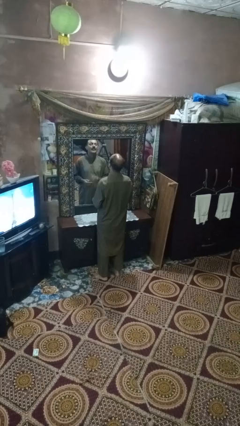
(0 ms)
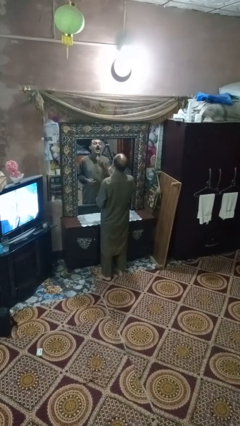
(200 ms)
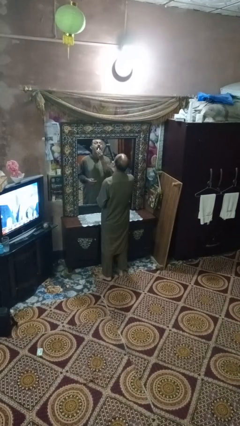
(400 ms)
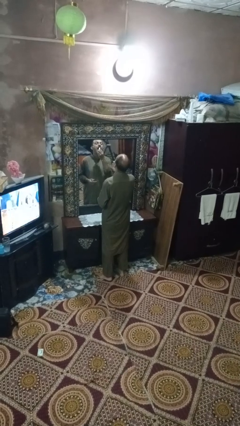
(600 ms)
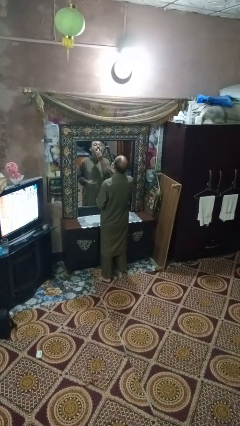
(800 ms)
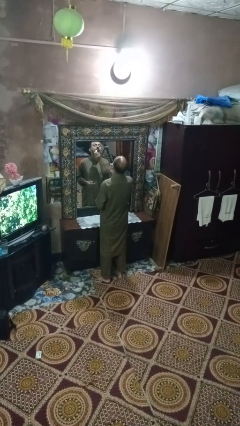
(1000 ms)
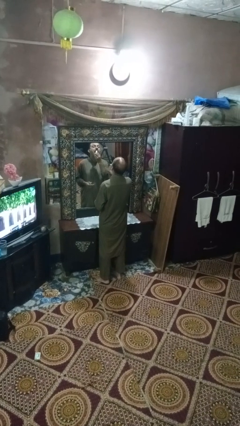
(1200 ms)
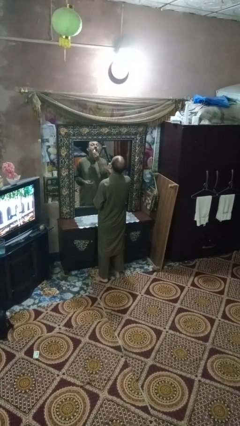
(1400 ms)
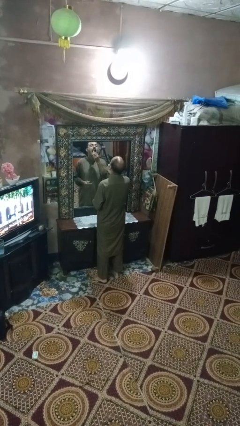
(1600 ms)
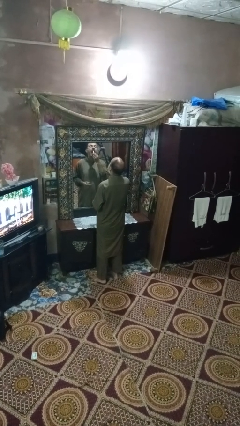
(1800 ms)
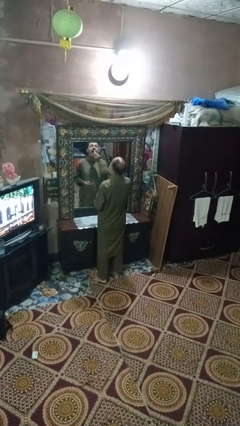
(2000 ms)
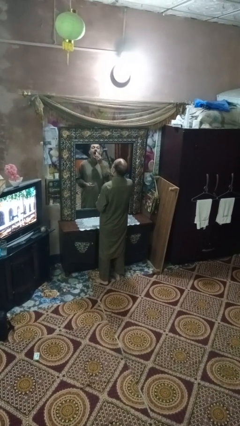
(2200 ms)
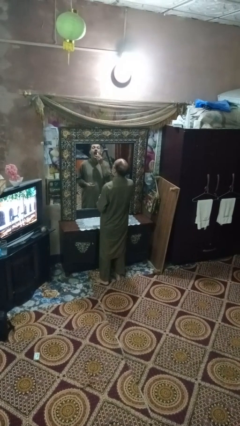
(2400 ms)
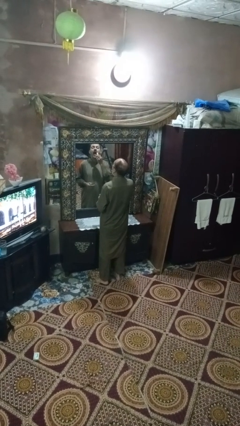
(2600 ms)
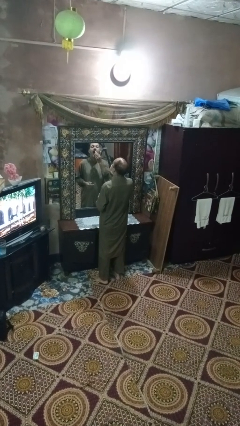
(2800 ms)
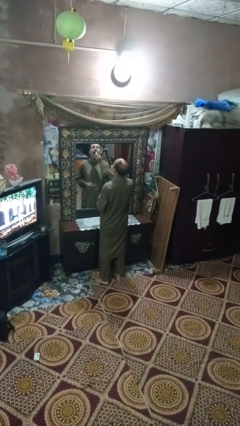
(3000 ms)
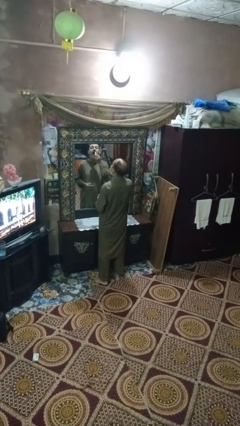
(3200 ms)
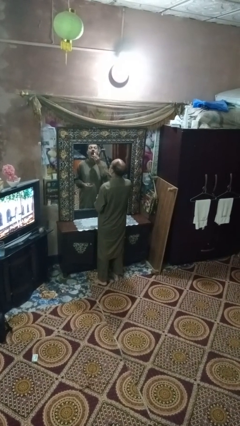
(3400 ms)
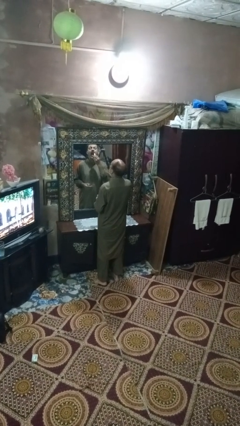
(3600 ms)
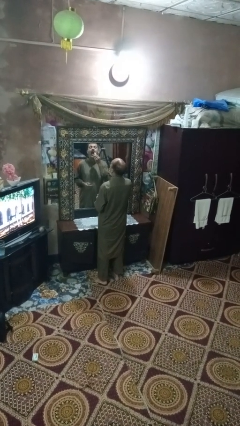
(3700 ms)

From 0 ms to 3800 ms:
person applies lip makeup

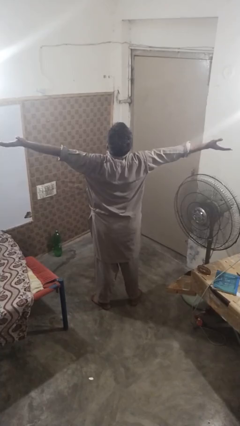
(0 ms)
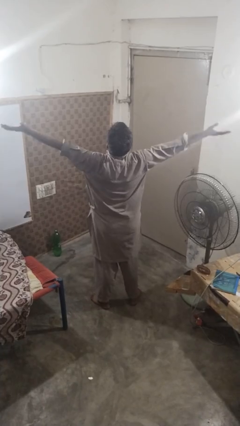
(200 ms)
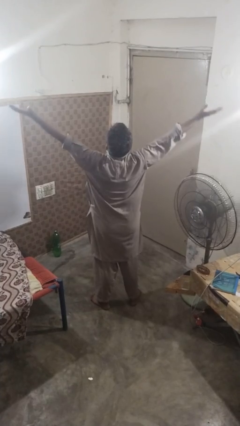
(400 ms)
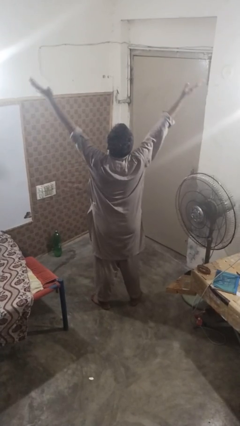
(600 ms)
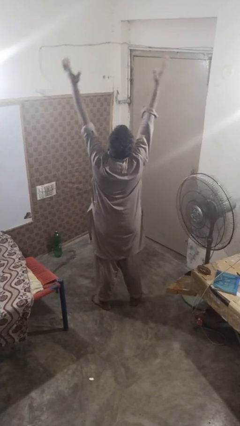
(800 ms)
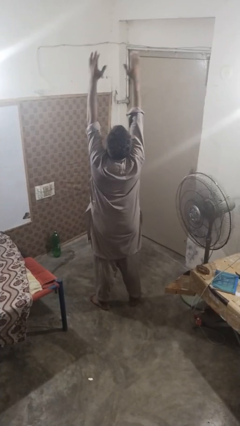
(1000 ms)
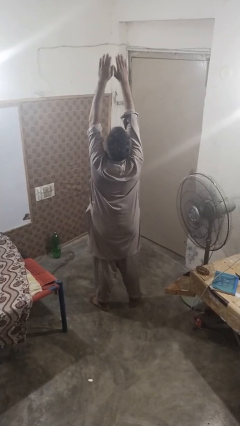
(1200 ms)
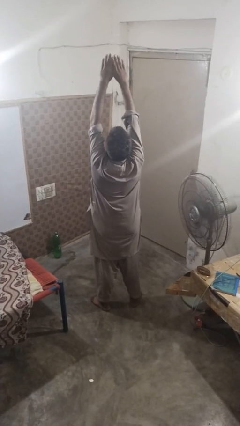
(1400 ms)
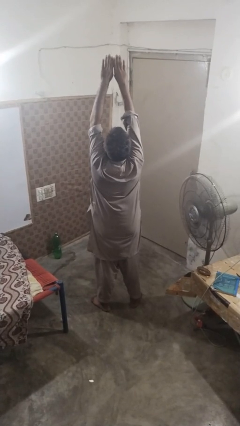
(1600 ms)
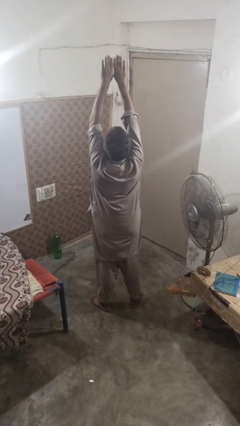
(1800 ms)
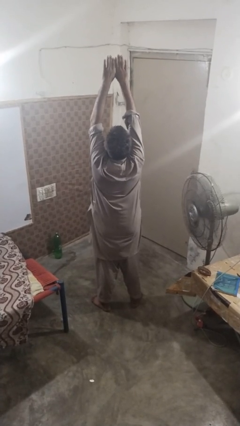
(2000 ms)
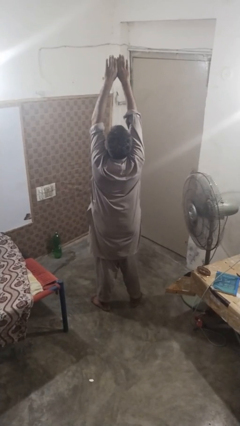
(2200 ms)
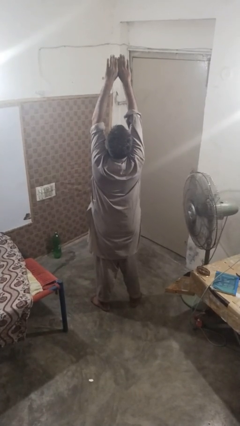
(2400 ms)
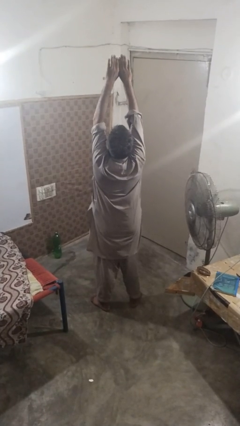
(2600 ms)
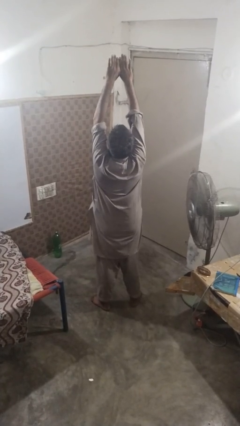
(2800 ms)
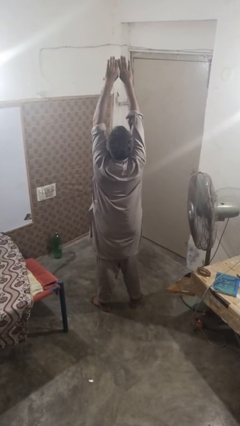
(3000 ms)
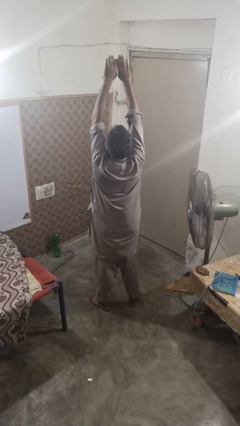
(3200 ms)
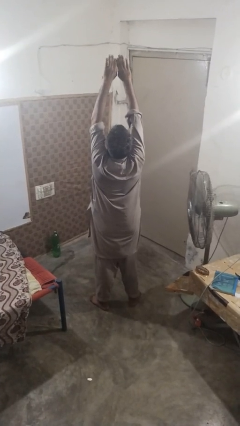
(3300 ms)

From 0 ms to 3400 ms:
person stretches arms over head

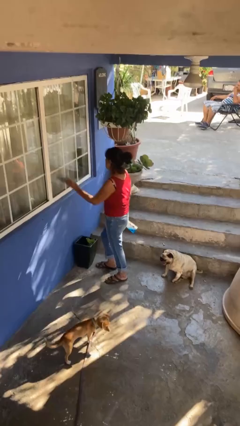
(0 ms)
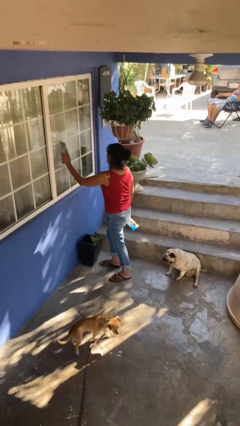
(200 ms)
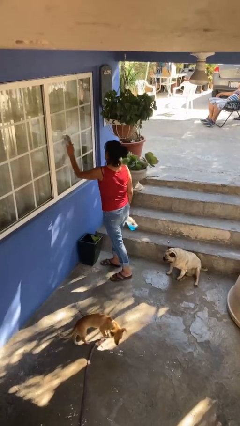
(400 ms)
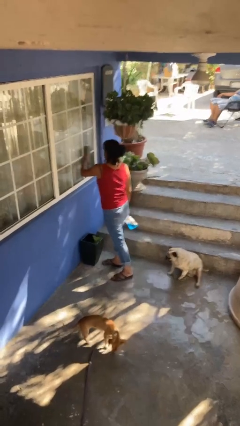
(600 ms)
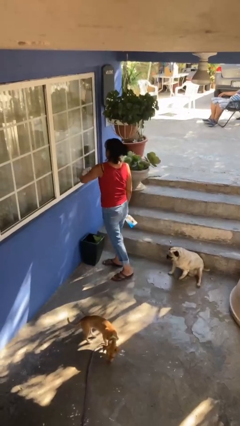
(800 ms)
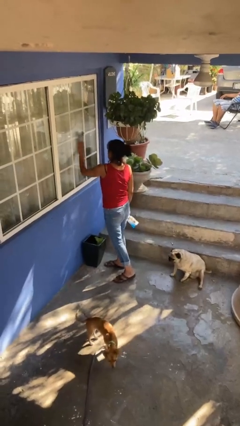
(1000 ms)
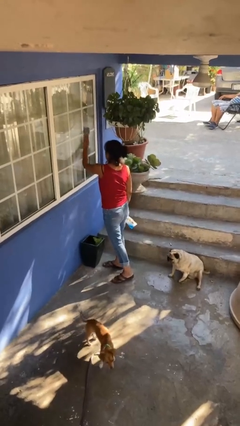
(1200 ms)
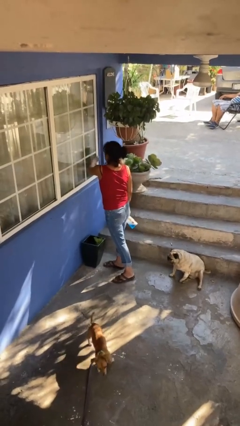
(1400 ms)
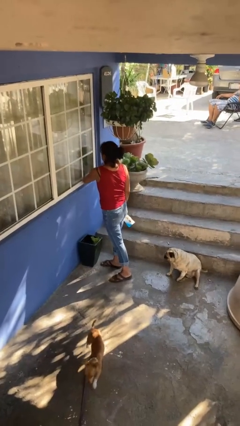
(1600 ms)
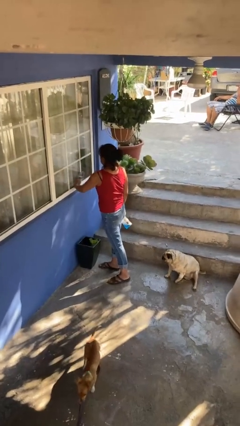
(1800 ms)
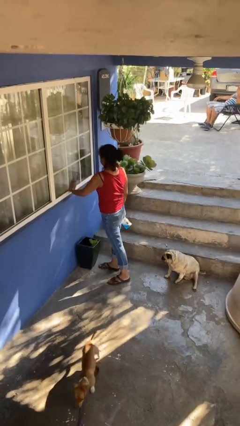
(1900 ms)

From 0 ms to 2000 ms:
person washes window

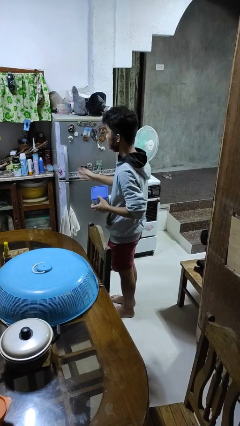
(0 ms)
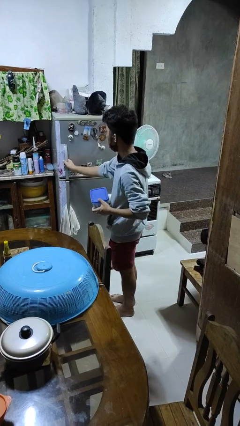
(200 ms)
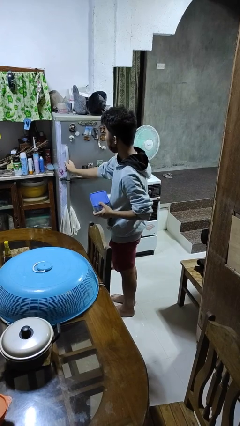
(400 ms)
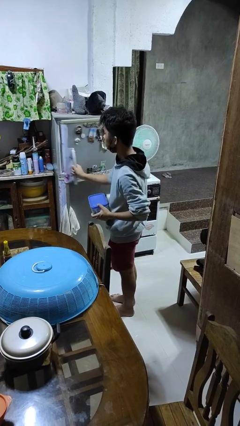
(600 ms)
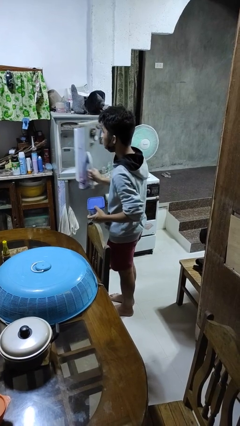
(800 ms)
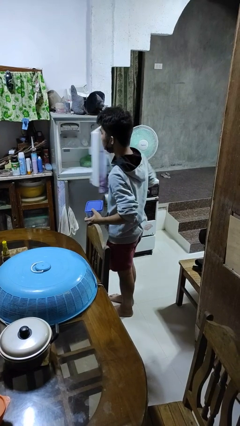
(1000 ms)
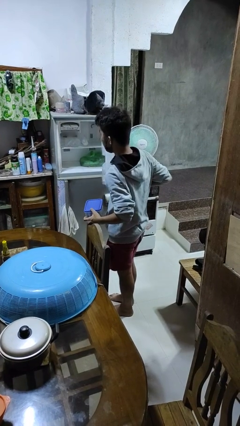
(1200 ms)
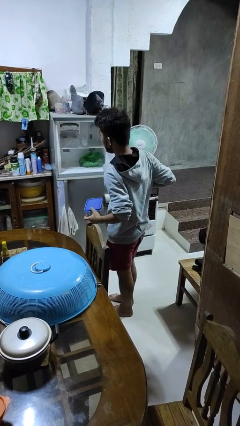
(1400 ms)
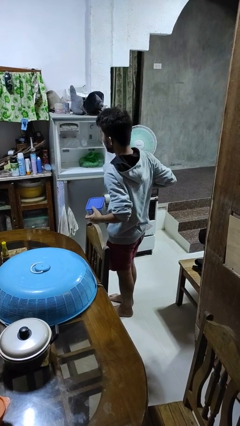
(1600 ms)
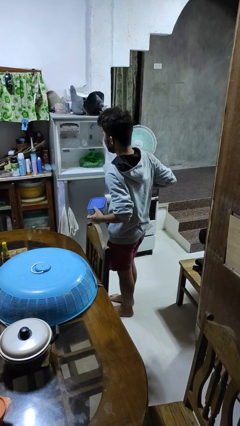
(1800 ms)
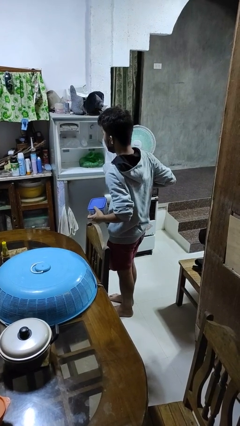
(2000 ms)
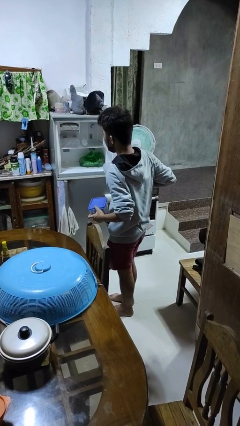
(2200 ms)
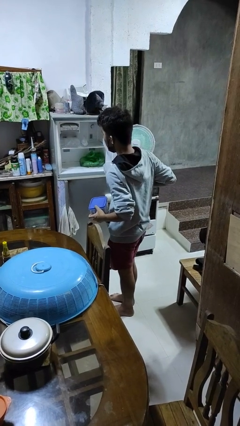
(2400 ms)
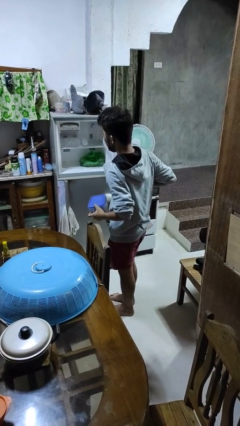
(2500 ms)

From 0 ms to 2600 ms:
person opens refrigerator

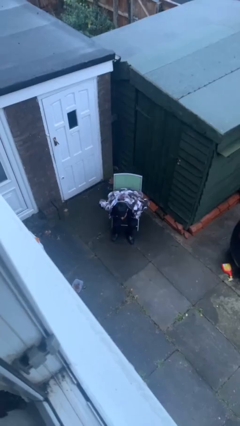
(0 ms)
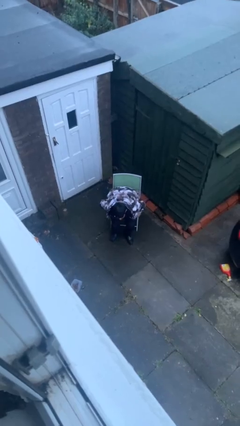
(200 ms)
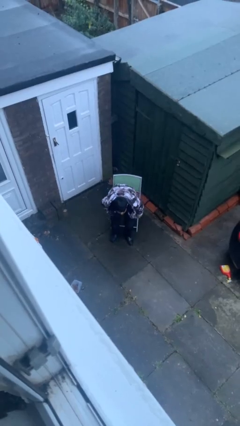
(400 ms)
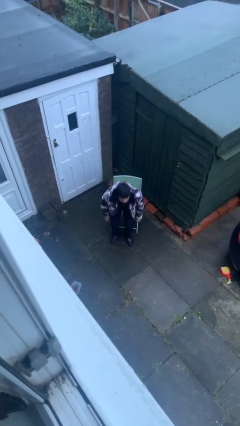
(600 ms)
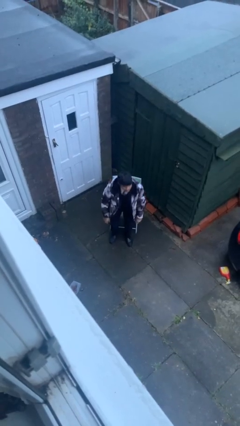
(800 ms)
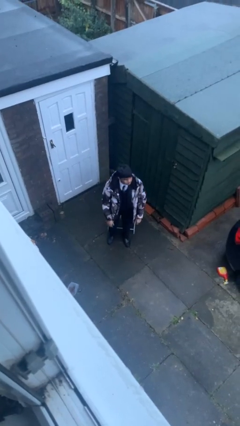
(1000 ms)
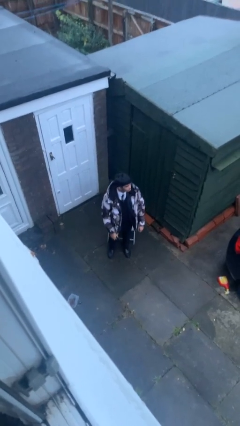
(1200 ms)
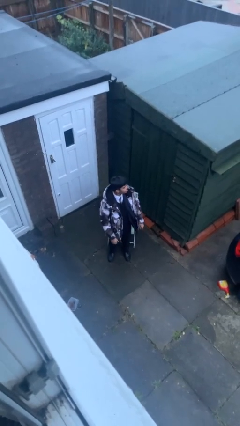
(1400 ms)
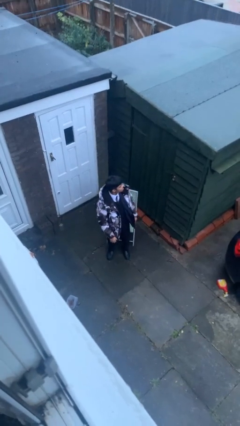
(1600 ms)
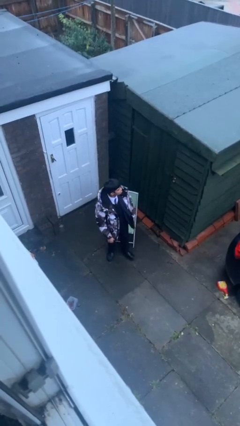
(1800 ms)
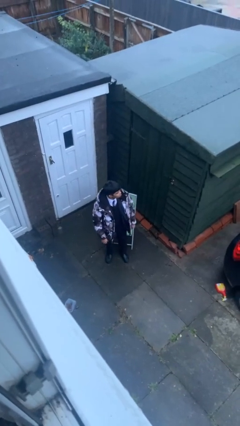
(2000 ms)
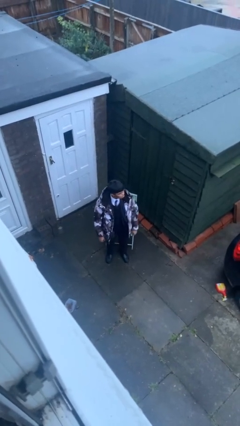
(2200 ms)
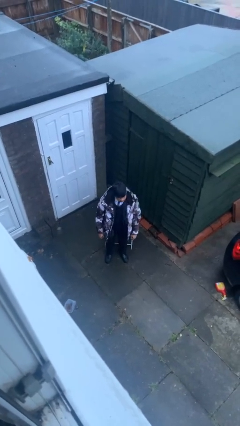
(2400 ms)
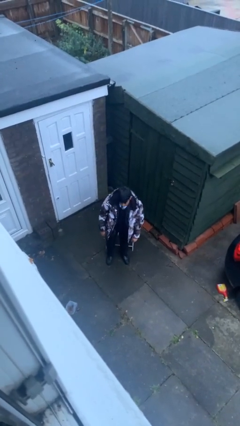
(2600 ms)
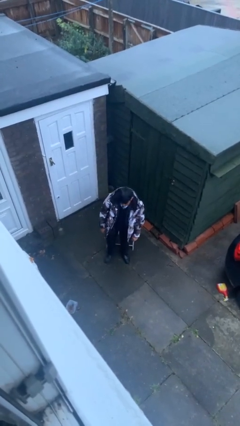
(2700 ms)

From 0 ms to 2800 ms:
person stands up

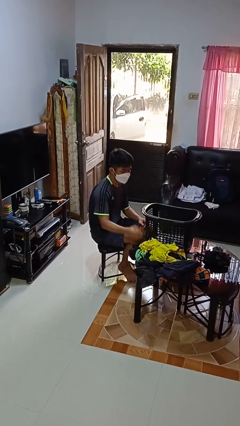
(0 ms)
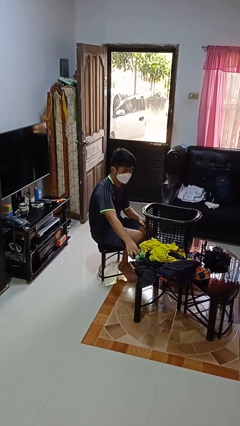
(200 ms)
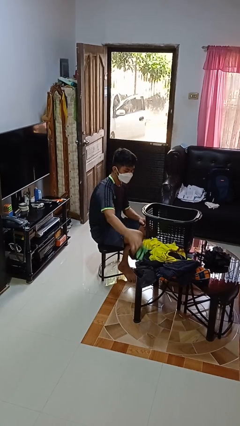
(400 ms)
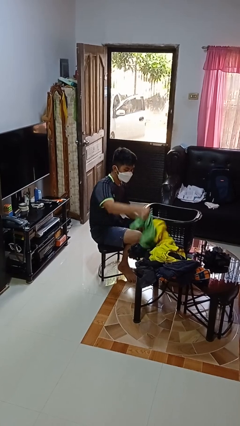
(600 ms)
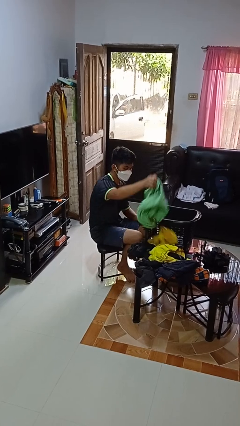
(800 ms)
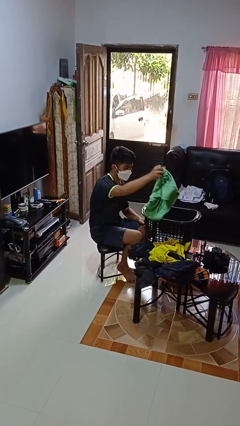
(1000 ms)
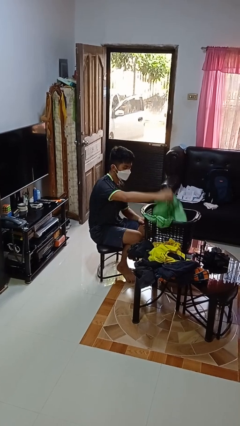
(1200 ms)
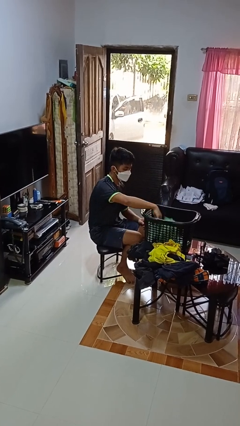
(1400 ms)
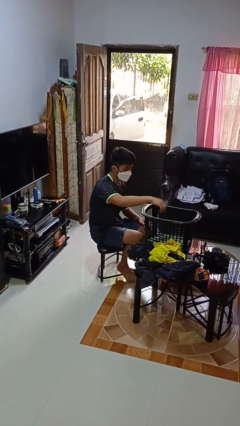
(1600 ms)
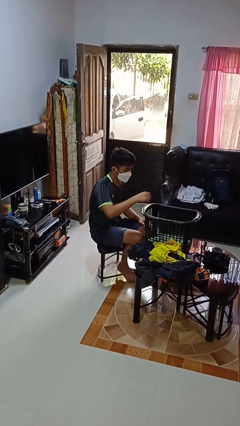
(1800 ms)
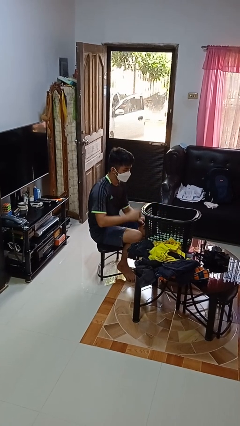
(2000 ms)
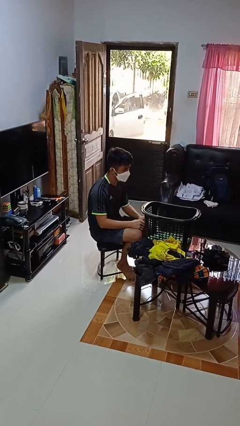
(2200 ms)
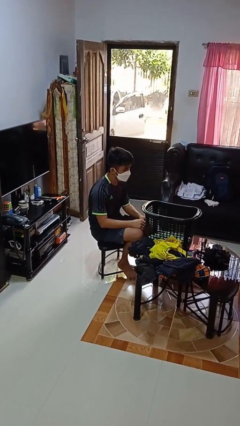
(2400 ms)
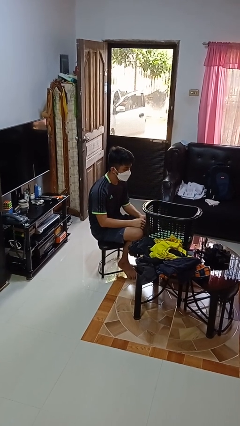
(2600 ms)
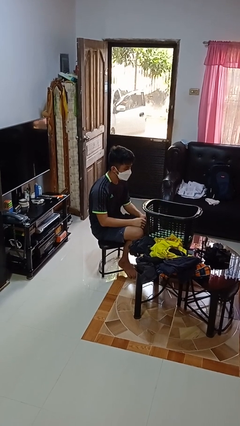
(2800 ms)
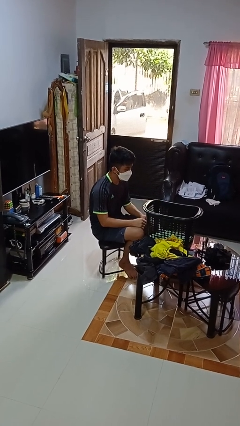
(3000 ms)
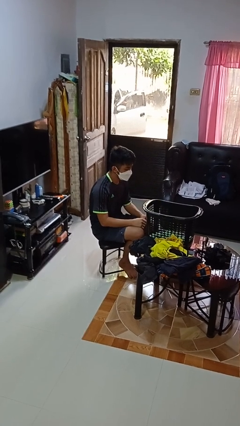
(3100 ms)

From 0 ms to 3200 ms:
person puts object into basket
